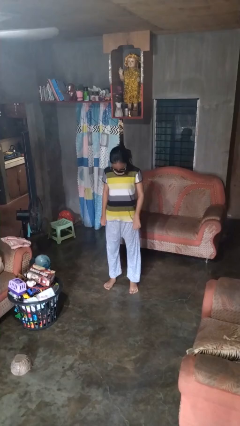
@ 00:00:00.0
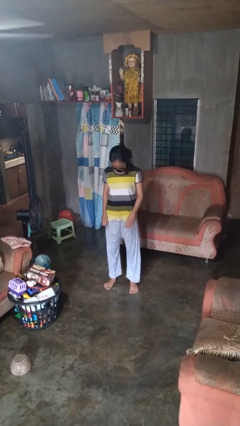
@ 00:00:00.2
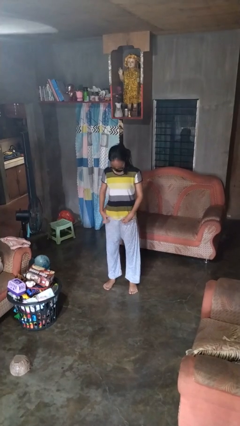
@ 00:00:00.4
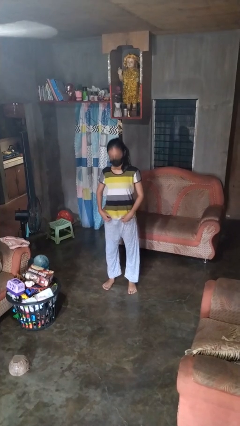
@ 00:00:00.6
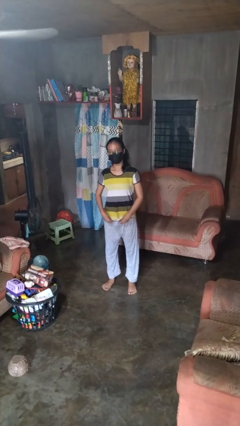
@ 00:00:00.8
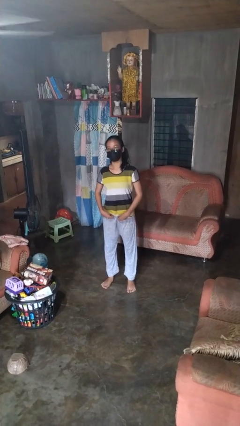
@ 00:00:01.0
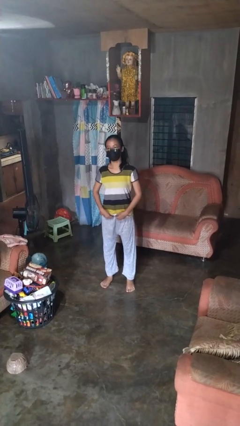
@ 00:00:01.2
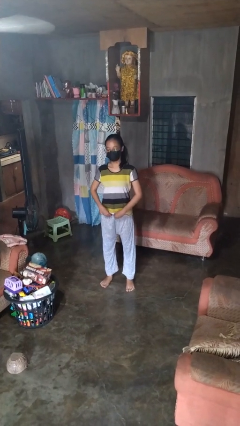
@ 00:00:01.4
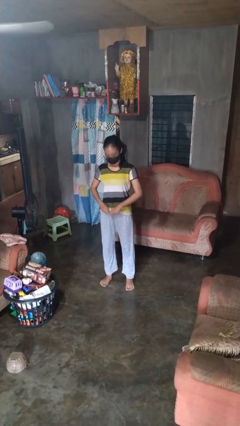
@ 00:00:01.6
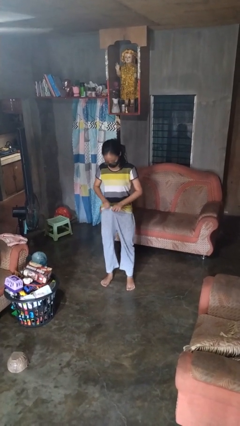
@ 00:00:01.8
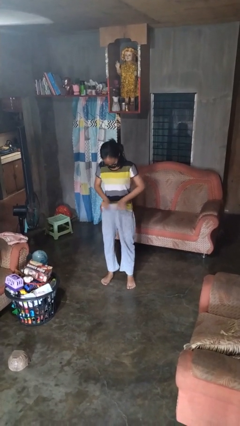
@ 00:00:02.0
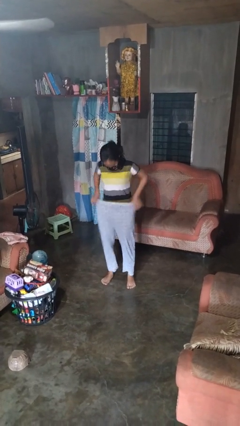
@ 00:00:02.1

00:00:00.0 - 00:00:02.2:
person tucks in shirt

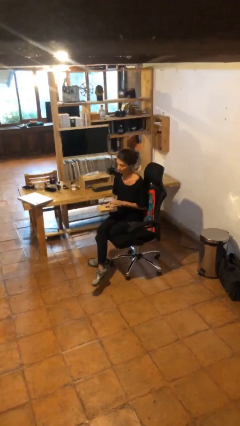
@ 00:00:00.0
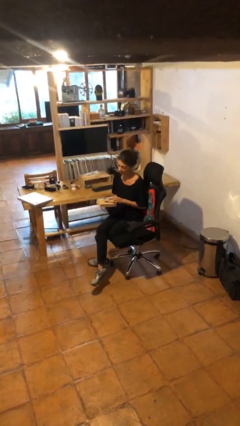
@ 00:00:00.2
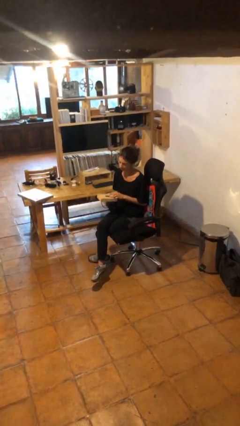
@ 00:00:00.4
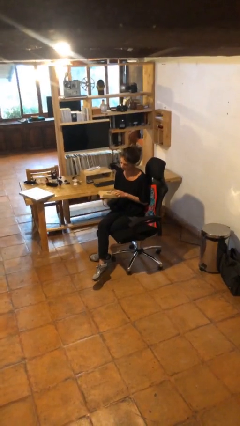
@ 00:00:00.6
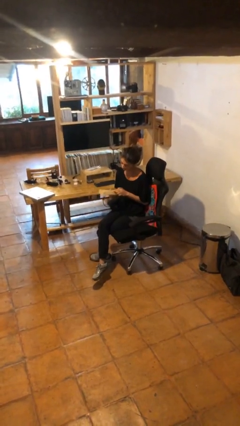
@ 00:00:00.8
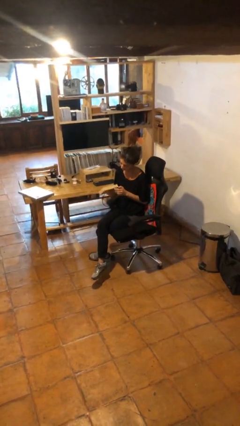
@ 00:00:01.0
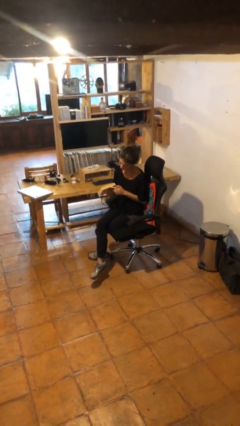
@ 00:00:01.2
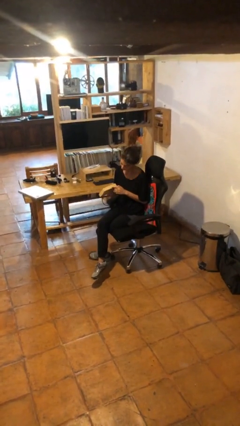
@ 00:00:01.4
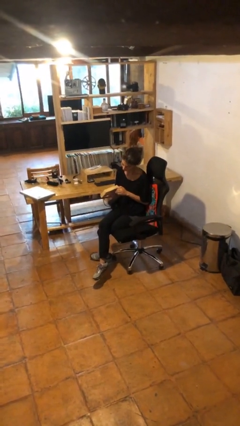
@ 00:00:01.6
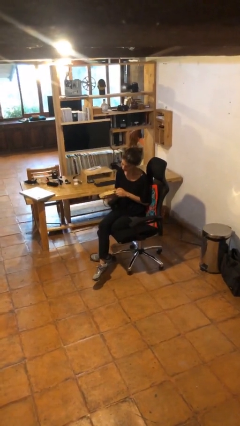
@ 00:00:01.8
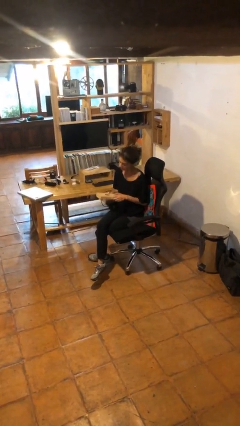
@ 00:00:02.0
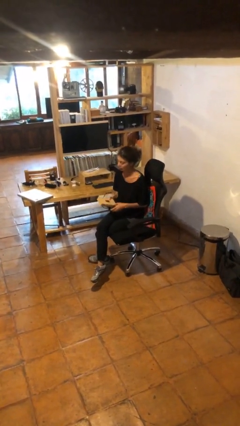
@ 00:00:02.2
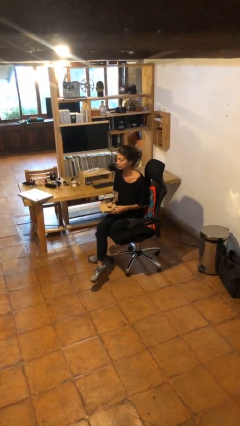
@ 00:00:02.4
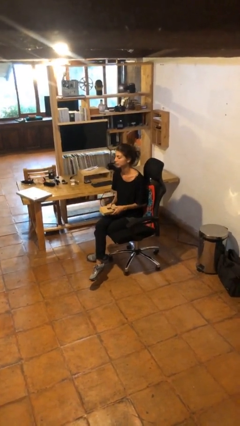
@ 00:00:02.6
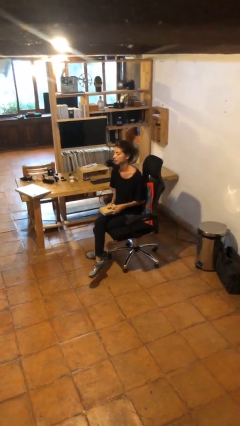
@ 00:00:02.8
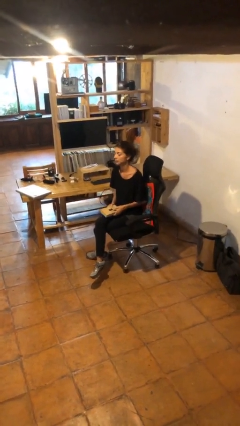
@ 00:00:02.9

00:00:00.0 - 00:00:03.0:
person taps object with finger

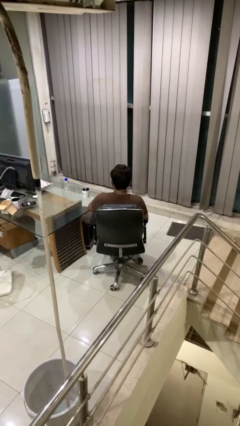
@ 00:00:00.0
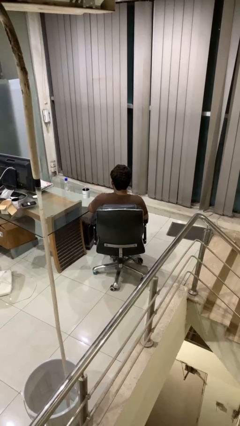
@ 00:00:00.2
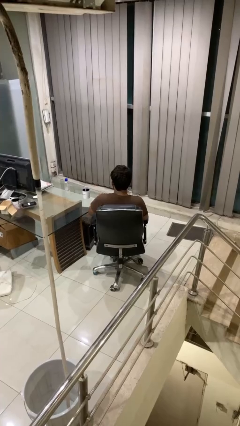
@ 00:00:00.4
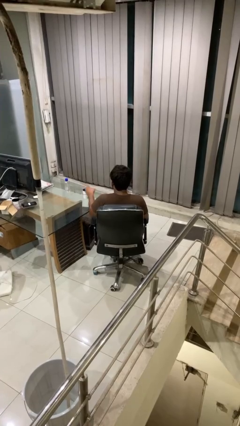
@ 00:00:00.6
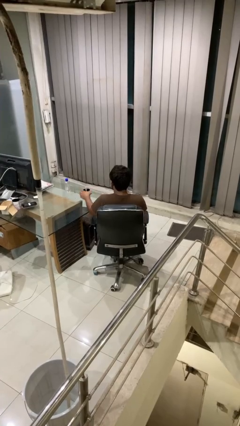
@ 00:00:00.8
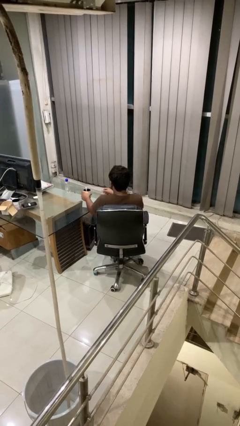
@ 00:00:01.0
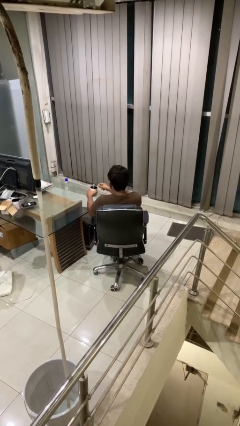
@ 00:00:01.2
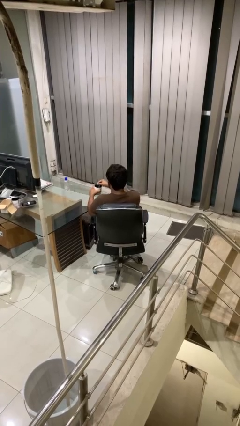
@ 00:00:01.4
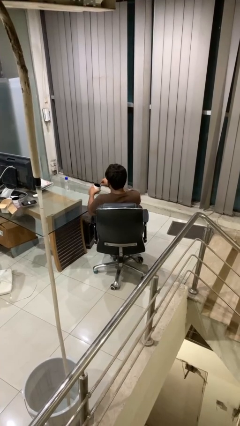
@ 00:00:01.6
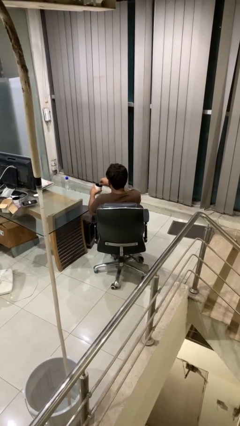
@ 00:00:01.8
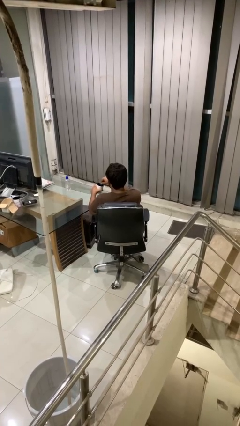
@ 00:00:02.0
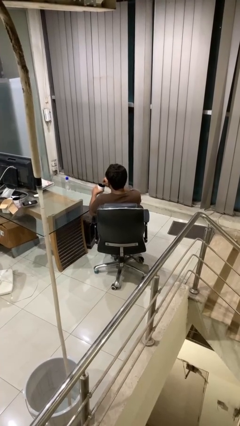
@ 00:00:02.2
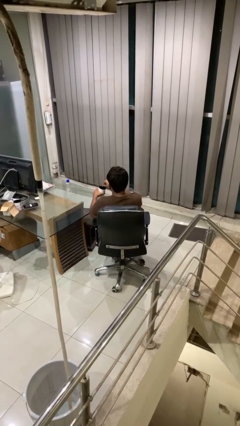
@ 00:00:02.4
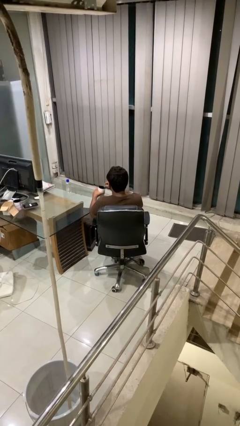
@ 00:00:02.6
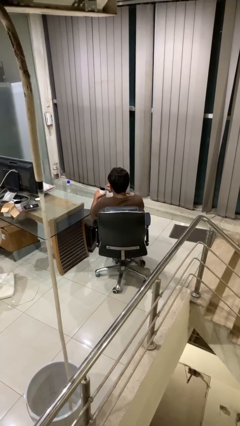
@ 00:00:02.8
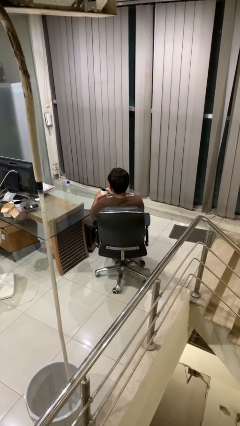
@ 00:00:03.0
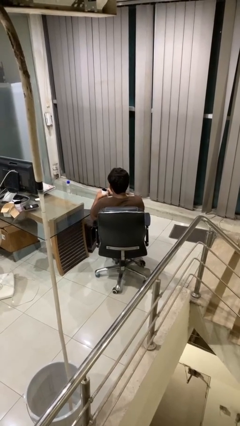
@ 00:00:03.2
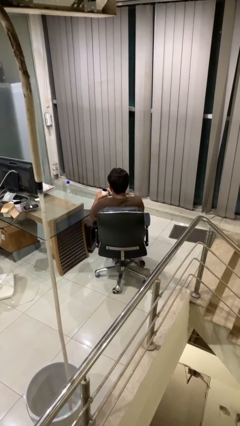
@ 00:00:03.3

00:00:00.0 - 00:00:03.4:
person stirs mug

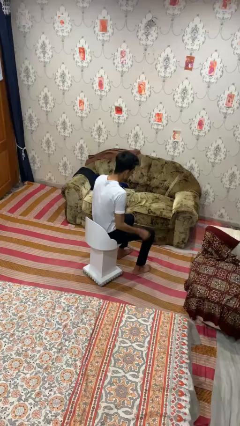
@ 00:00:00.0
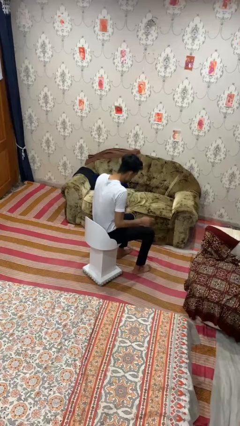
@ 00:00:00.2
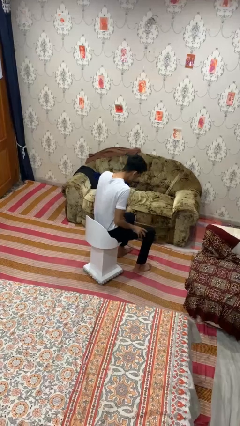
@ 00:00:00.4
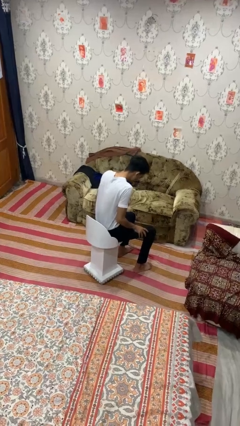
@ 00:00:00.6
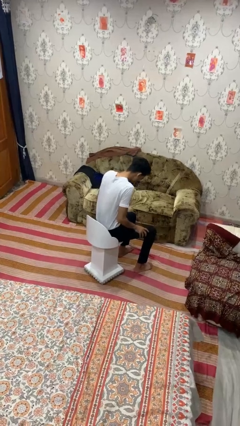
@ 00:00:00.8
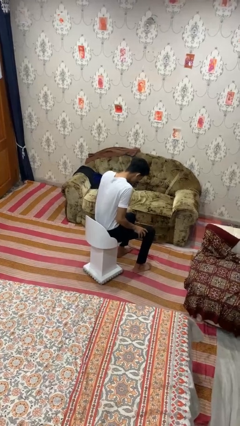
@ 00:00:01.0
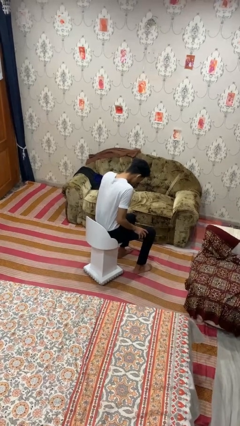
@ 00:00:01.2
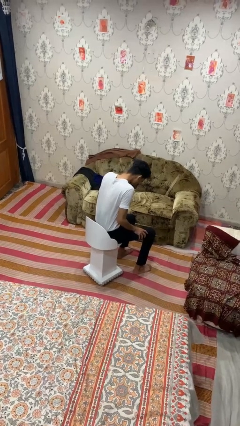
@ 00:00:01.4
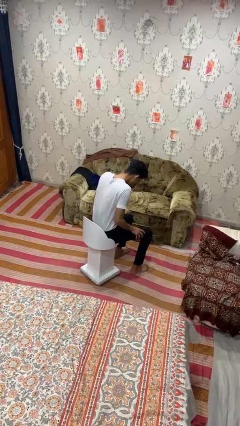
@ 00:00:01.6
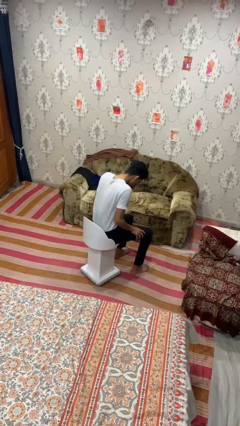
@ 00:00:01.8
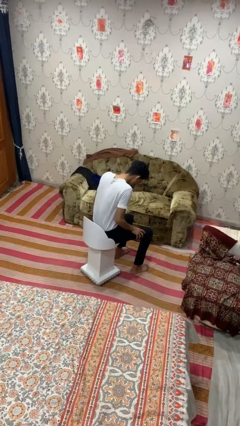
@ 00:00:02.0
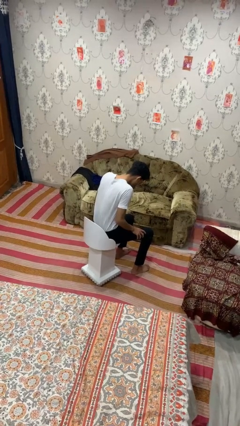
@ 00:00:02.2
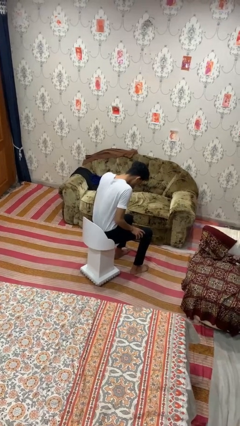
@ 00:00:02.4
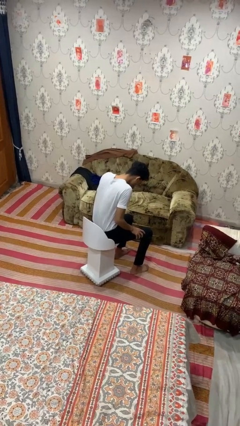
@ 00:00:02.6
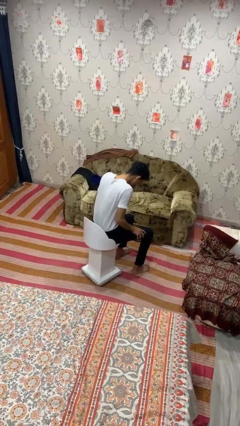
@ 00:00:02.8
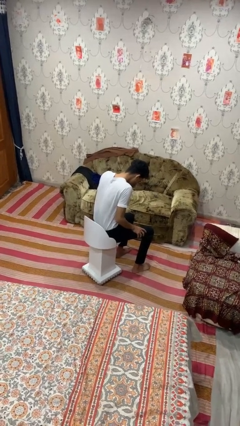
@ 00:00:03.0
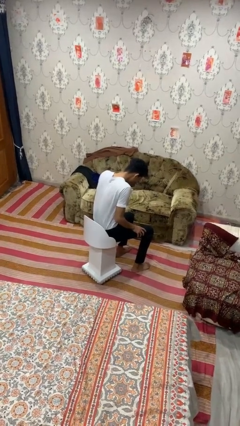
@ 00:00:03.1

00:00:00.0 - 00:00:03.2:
person slaps hands on thighs

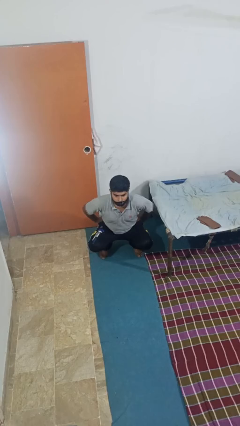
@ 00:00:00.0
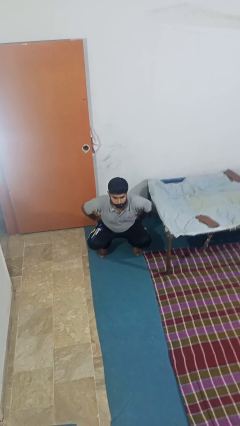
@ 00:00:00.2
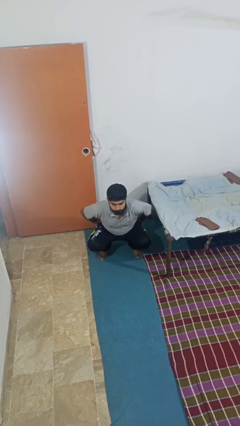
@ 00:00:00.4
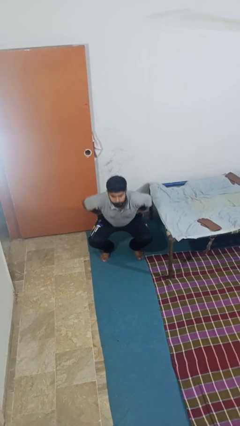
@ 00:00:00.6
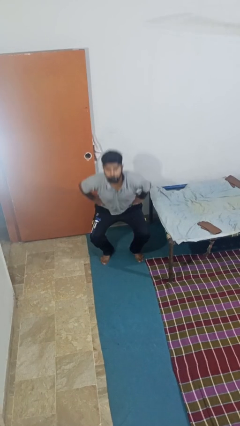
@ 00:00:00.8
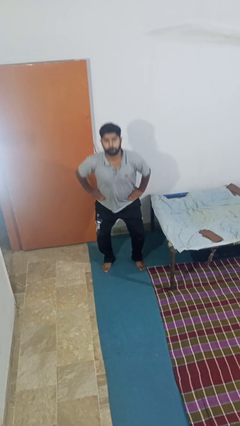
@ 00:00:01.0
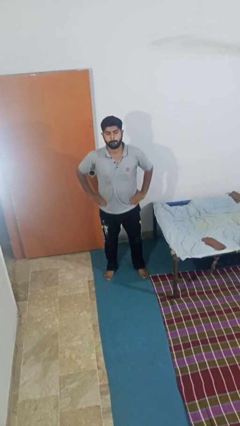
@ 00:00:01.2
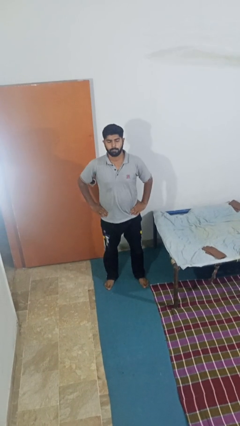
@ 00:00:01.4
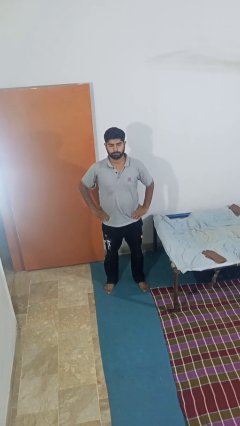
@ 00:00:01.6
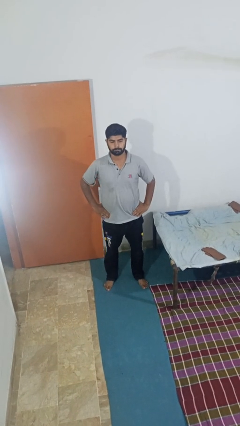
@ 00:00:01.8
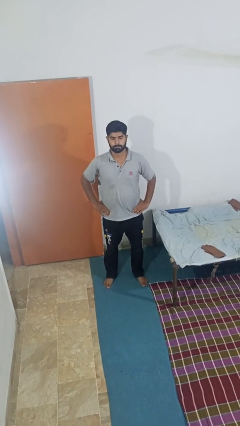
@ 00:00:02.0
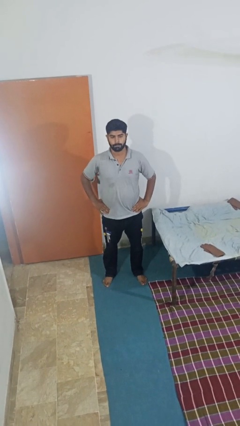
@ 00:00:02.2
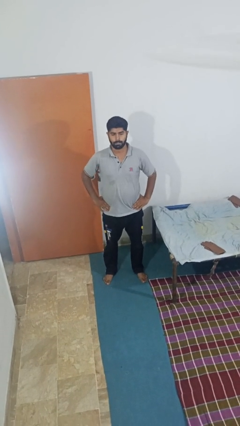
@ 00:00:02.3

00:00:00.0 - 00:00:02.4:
person stands up

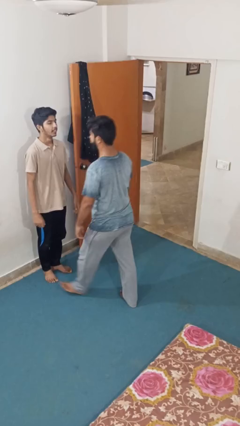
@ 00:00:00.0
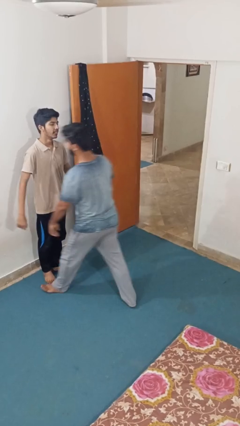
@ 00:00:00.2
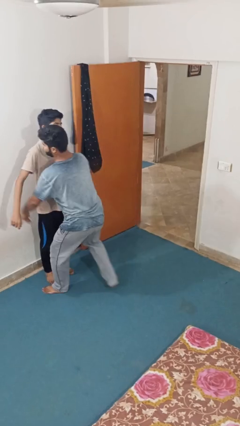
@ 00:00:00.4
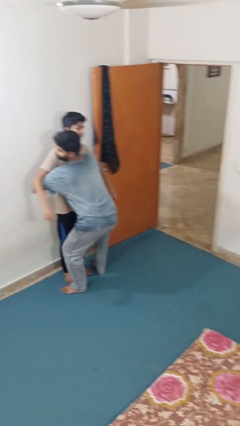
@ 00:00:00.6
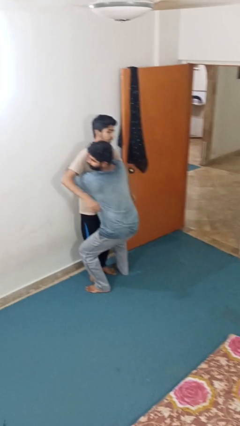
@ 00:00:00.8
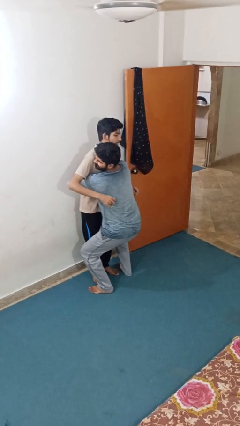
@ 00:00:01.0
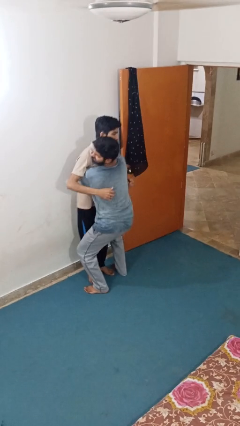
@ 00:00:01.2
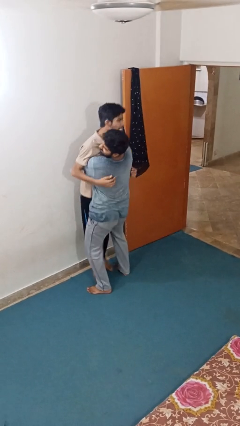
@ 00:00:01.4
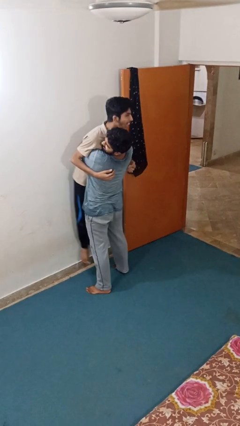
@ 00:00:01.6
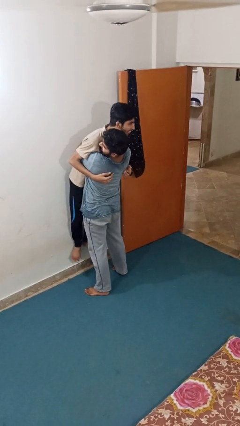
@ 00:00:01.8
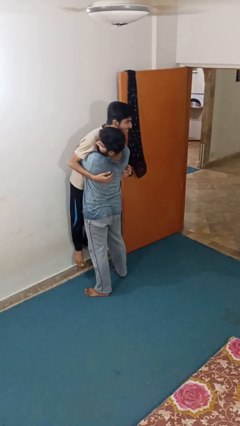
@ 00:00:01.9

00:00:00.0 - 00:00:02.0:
person picks up person

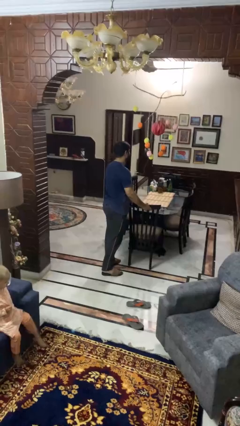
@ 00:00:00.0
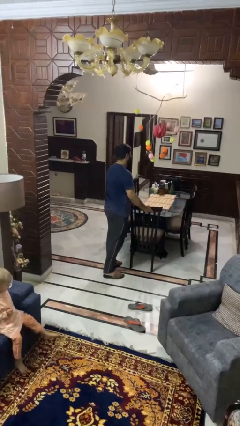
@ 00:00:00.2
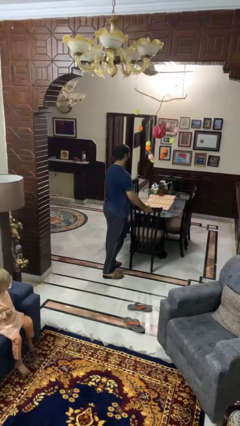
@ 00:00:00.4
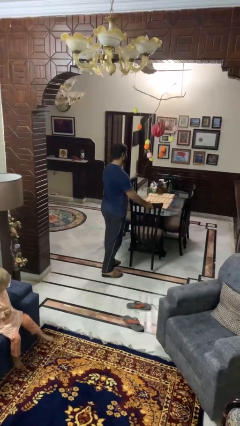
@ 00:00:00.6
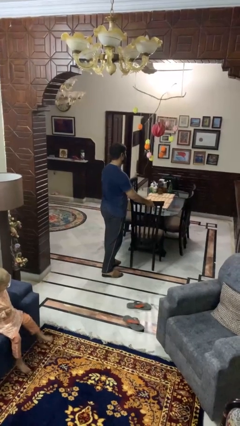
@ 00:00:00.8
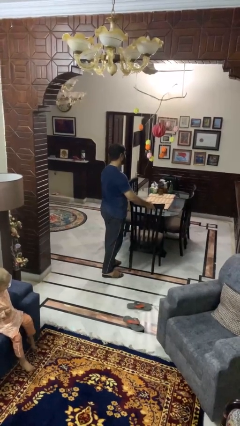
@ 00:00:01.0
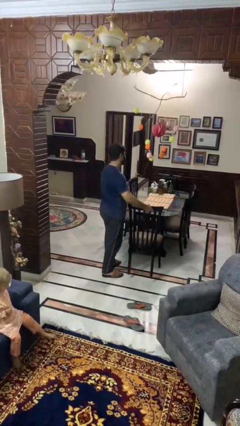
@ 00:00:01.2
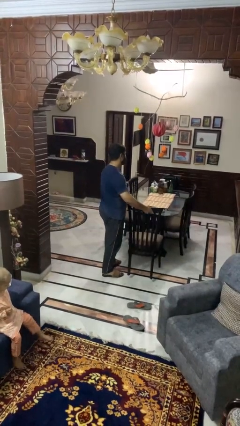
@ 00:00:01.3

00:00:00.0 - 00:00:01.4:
person pulls out chair
